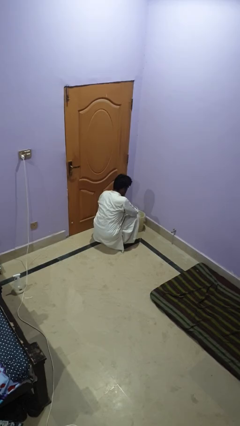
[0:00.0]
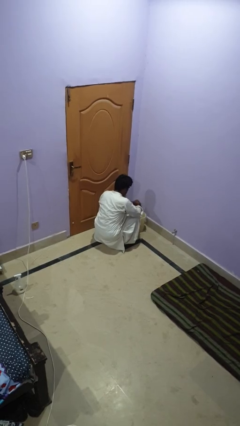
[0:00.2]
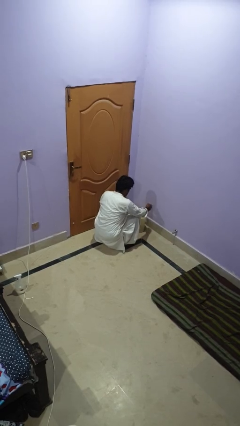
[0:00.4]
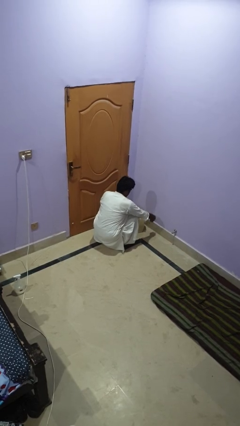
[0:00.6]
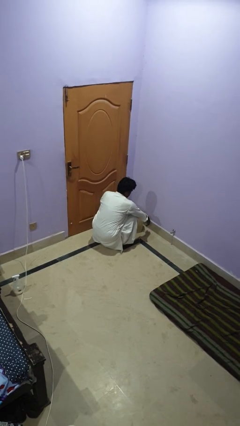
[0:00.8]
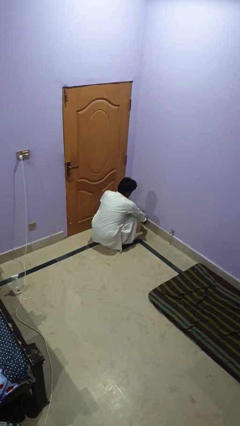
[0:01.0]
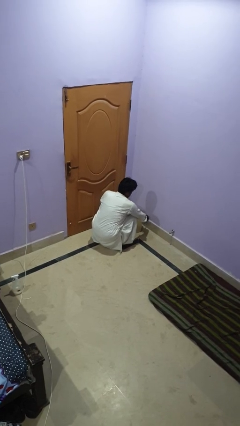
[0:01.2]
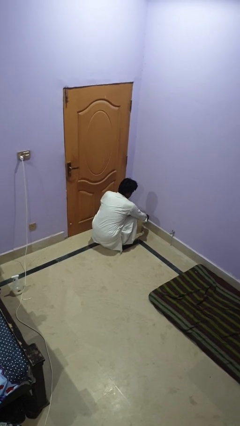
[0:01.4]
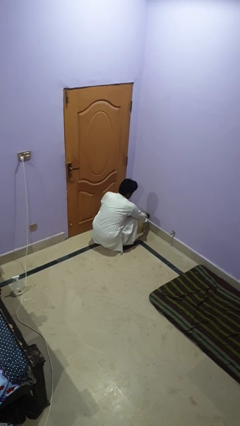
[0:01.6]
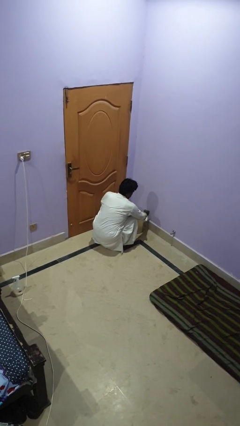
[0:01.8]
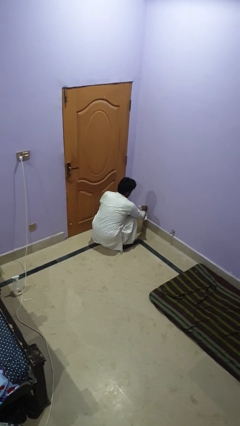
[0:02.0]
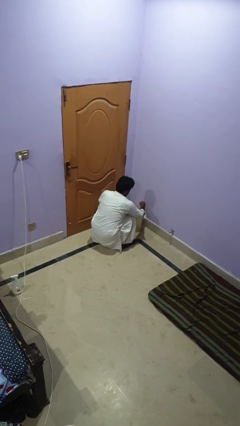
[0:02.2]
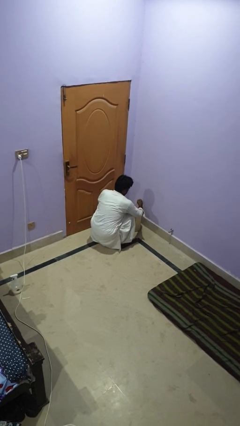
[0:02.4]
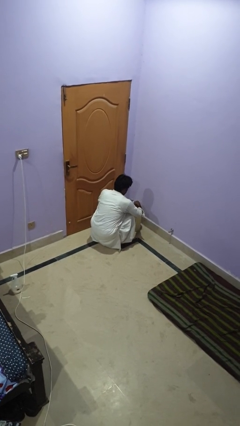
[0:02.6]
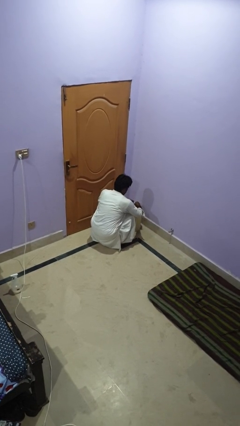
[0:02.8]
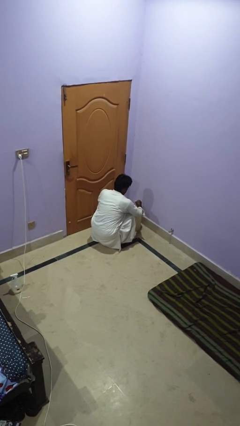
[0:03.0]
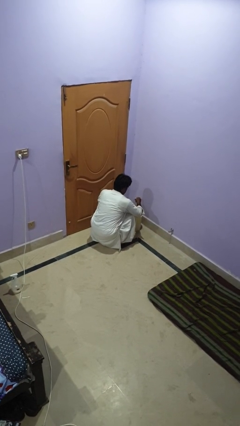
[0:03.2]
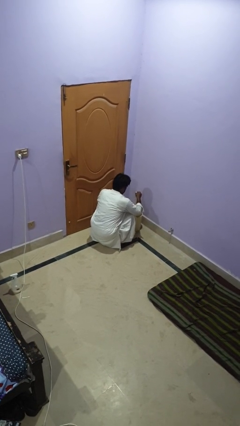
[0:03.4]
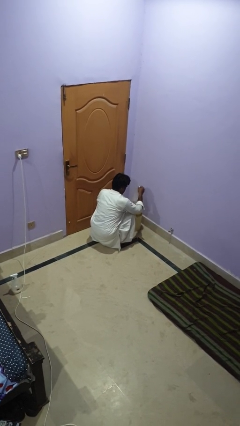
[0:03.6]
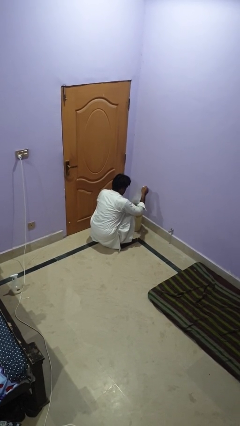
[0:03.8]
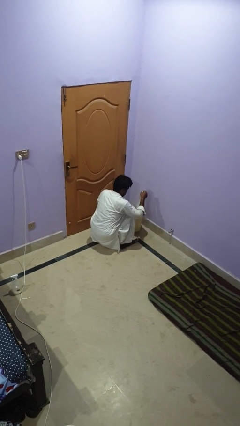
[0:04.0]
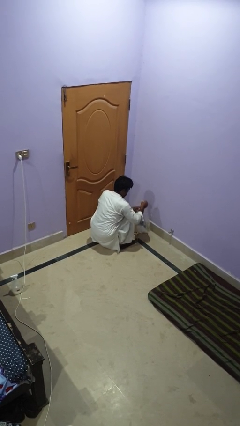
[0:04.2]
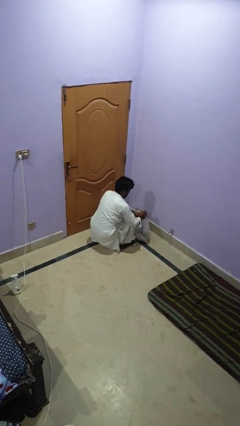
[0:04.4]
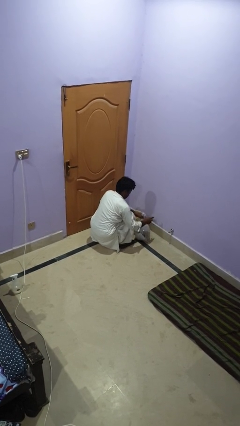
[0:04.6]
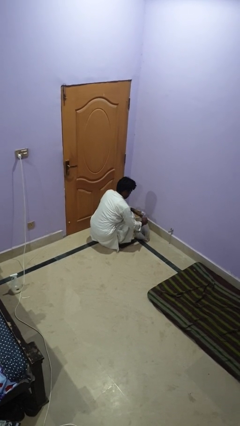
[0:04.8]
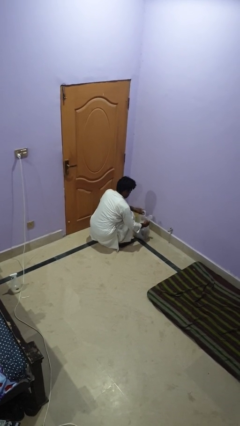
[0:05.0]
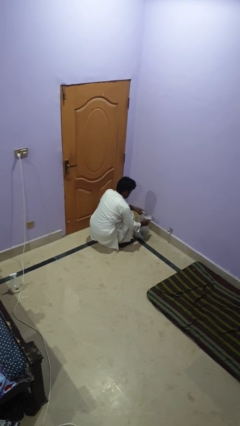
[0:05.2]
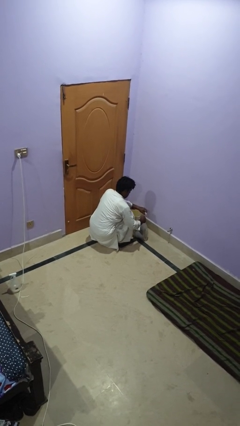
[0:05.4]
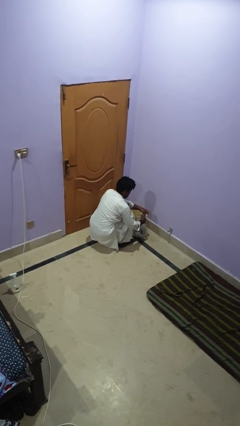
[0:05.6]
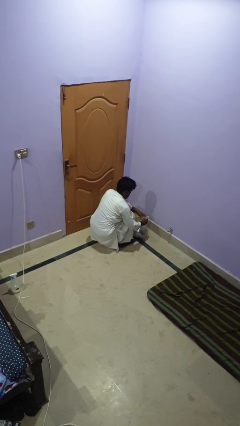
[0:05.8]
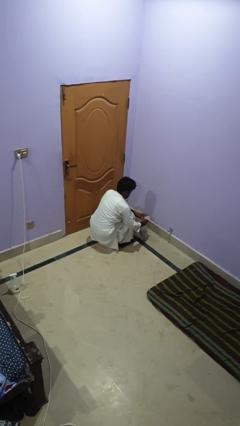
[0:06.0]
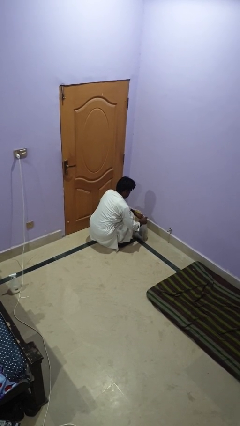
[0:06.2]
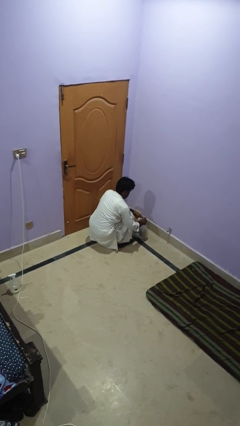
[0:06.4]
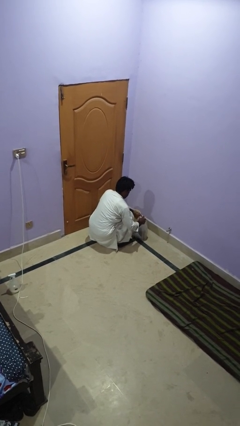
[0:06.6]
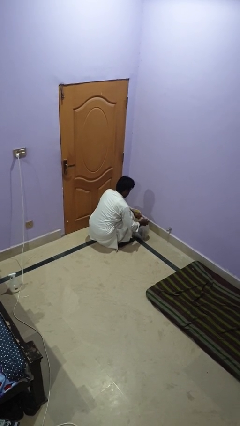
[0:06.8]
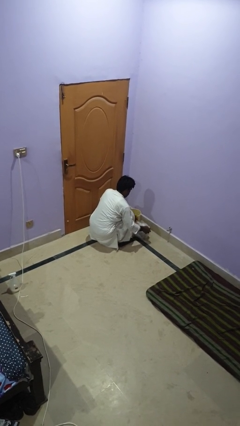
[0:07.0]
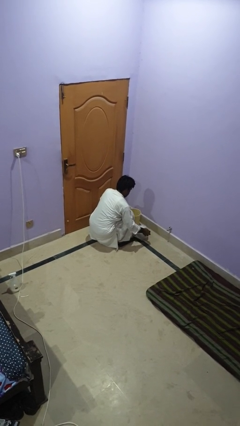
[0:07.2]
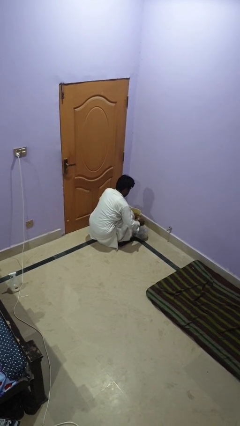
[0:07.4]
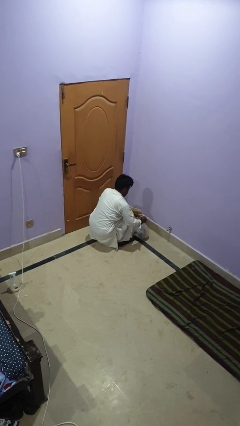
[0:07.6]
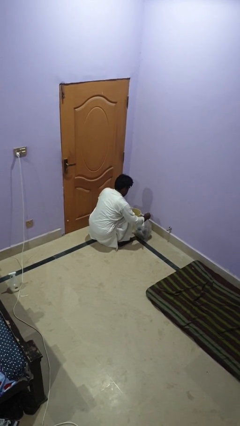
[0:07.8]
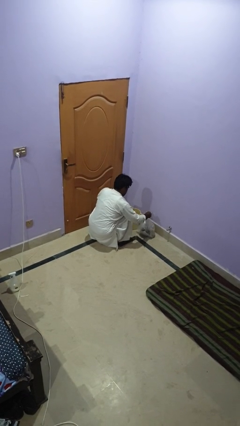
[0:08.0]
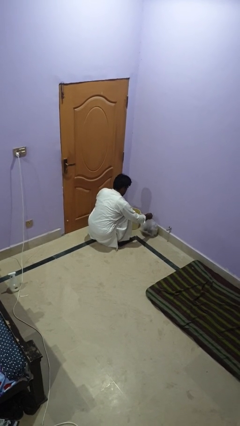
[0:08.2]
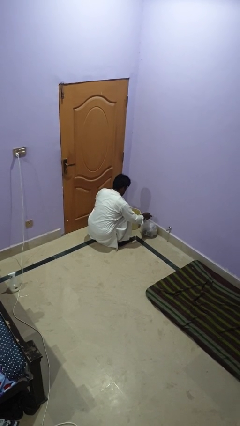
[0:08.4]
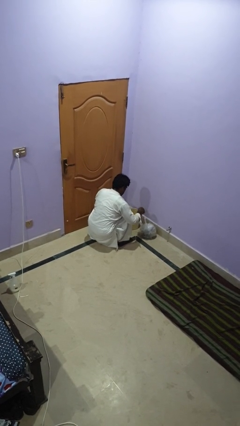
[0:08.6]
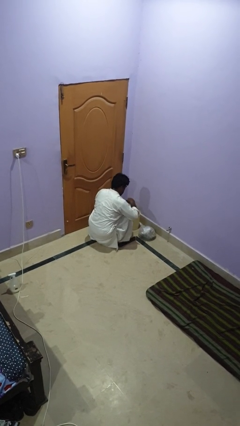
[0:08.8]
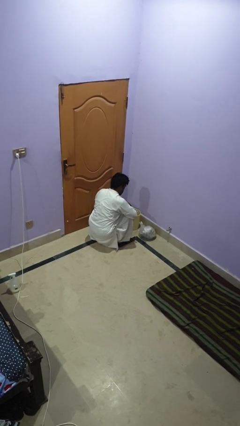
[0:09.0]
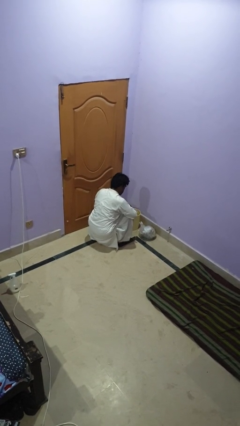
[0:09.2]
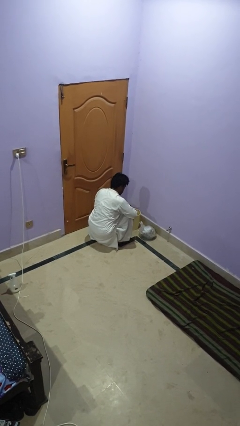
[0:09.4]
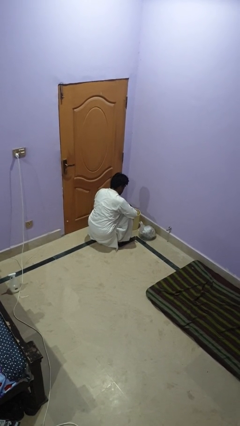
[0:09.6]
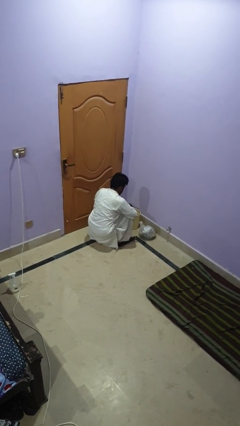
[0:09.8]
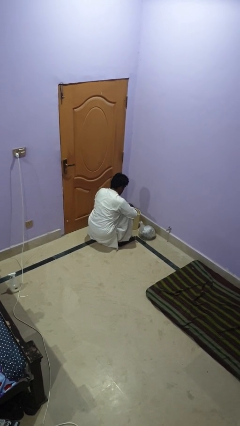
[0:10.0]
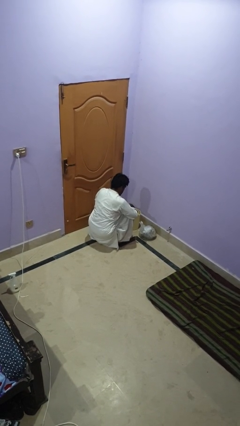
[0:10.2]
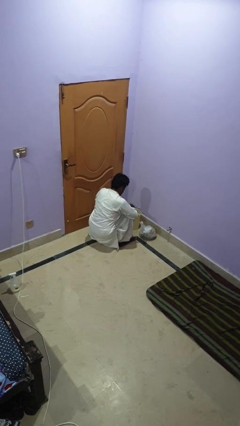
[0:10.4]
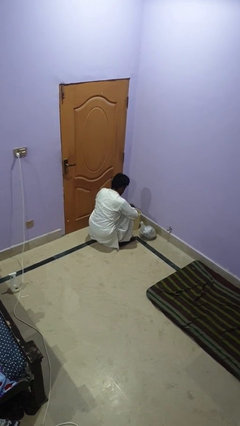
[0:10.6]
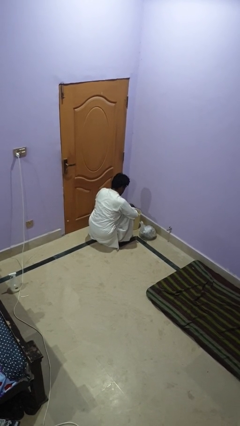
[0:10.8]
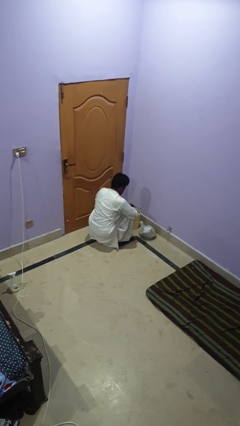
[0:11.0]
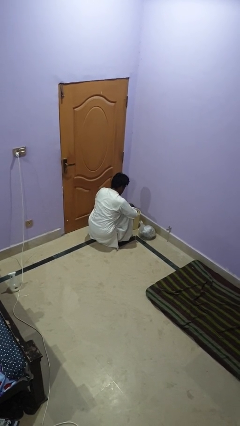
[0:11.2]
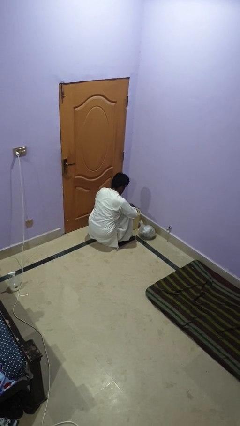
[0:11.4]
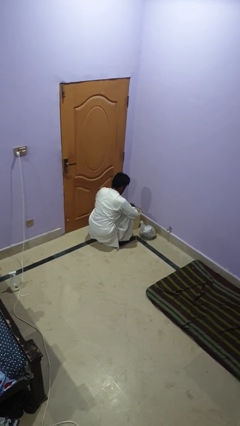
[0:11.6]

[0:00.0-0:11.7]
person removes trashbag from trashcan

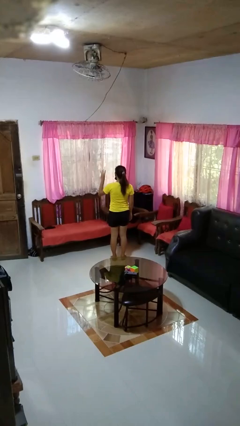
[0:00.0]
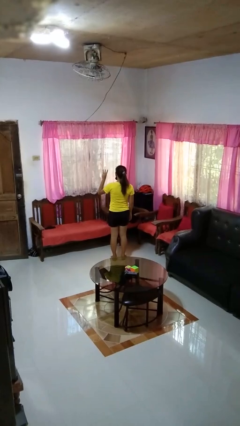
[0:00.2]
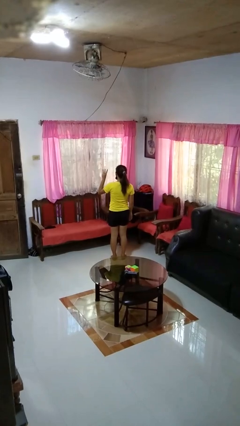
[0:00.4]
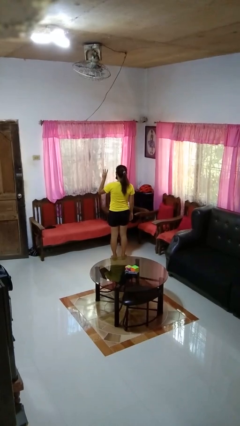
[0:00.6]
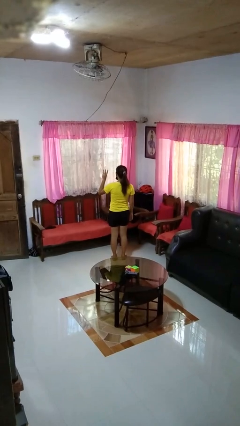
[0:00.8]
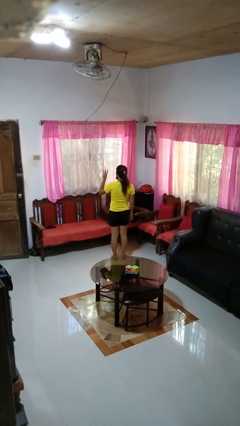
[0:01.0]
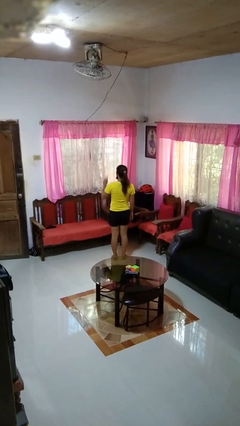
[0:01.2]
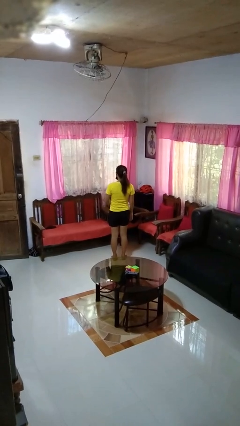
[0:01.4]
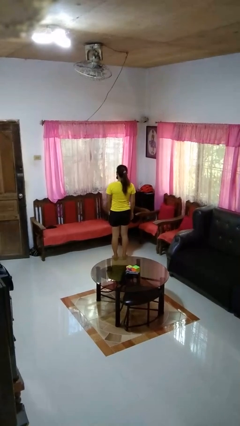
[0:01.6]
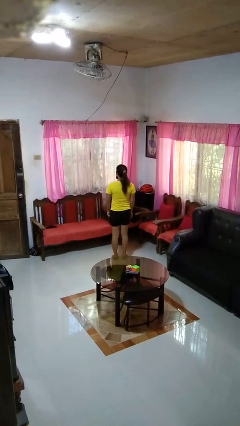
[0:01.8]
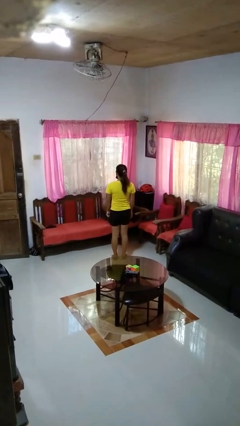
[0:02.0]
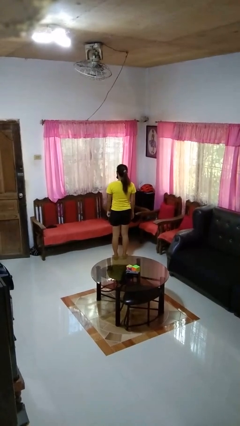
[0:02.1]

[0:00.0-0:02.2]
person gestures number three

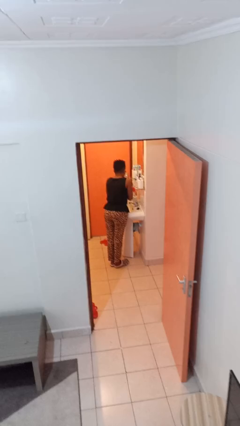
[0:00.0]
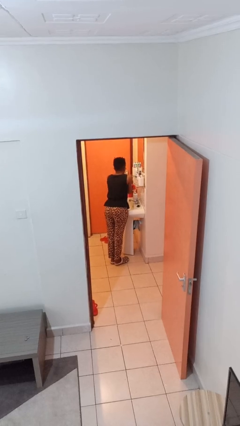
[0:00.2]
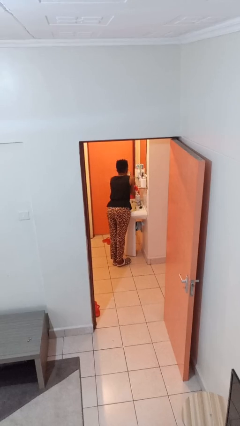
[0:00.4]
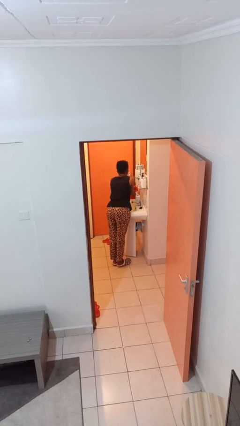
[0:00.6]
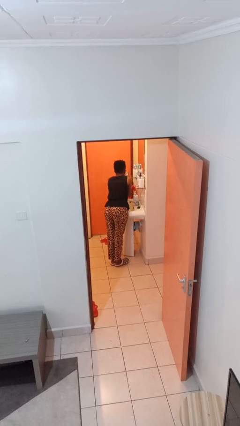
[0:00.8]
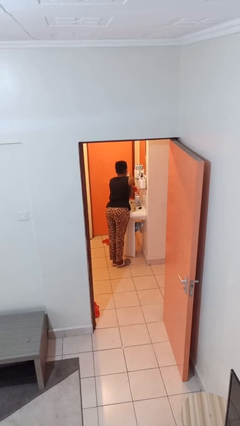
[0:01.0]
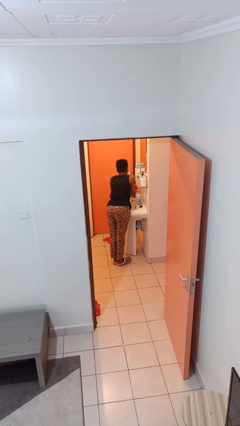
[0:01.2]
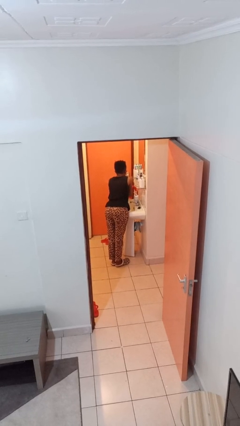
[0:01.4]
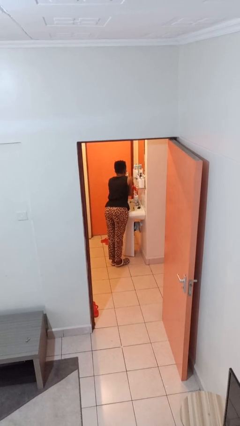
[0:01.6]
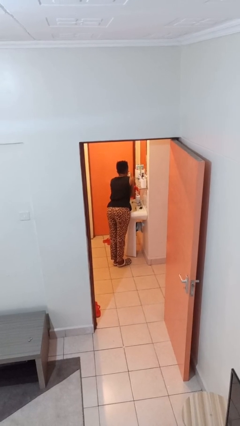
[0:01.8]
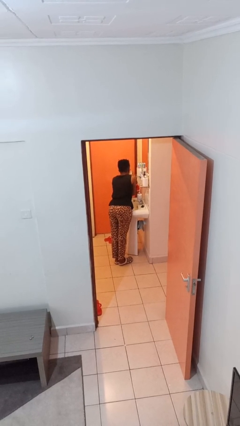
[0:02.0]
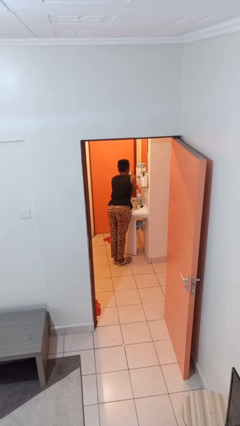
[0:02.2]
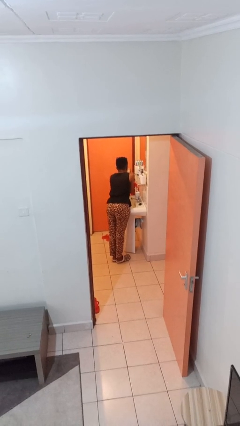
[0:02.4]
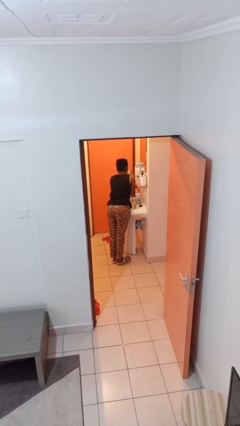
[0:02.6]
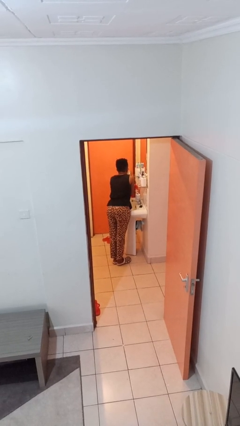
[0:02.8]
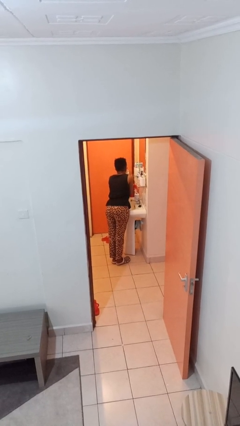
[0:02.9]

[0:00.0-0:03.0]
person dries hands with towel

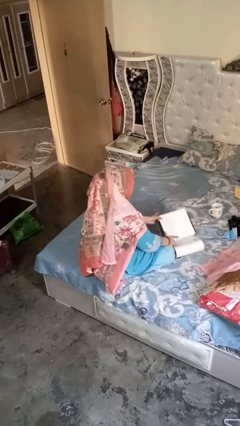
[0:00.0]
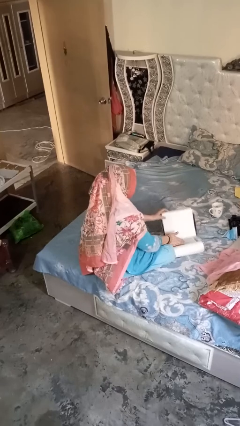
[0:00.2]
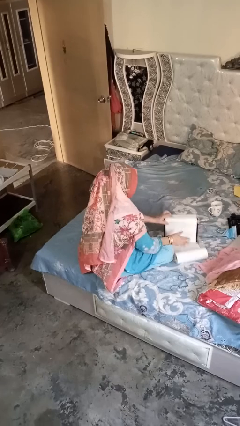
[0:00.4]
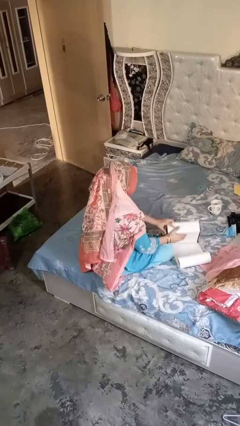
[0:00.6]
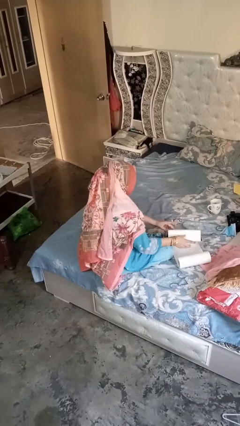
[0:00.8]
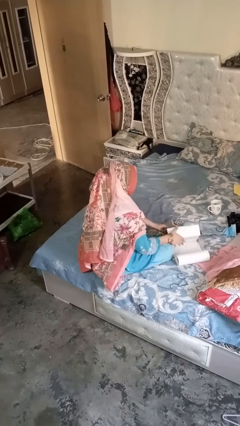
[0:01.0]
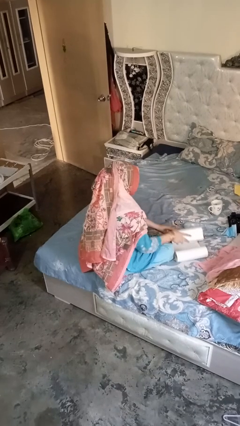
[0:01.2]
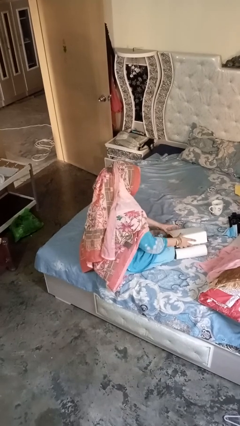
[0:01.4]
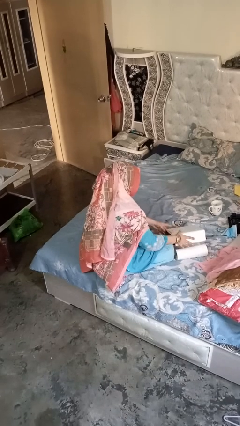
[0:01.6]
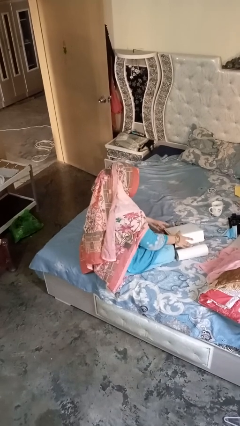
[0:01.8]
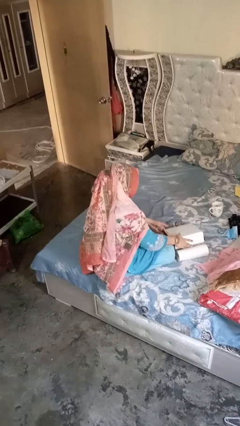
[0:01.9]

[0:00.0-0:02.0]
person wraps box
